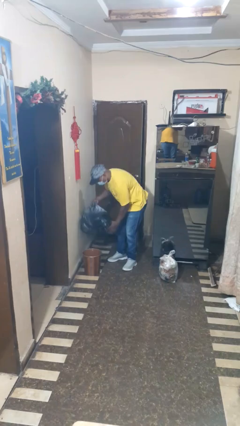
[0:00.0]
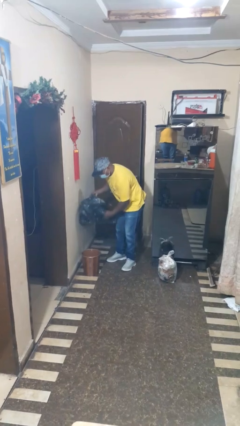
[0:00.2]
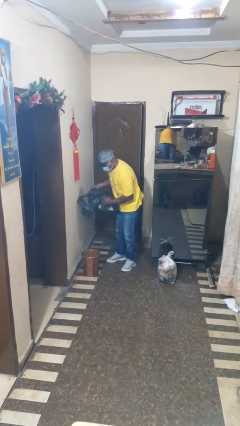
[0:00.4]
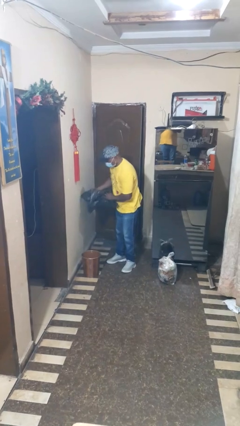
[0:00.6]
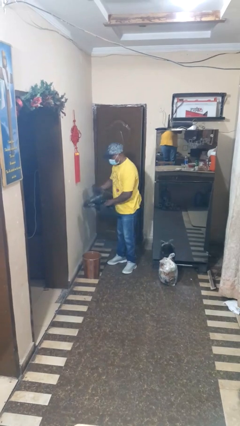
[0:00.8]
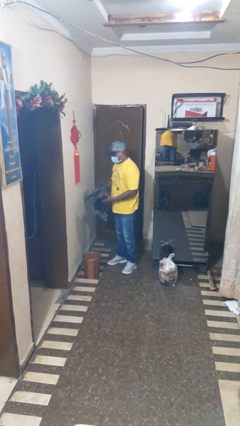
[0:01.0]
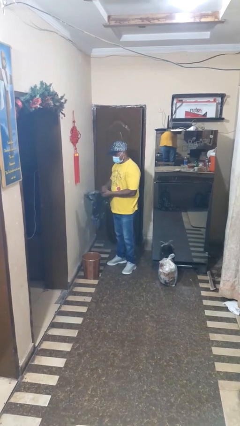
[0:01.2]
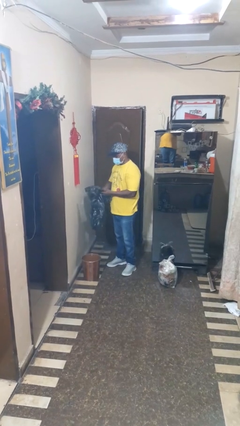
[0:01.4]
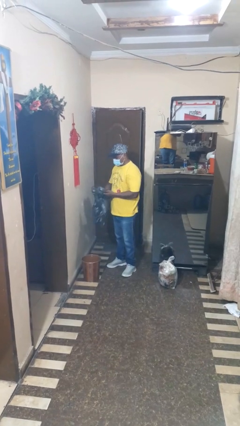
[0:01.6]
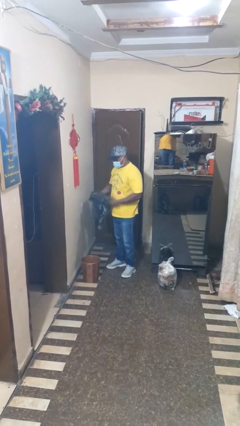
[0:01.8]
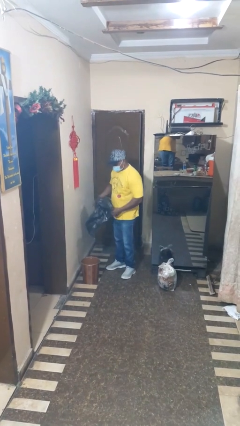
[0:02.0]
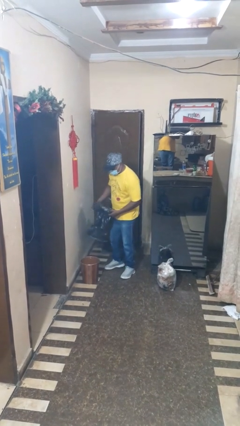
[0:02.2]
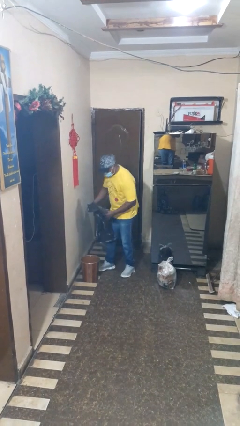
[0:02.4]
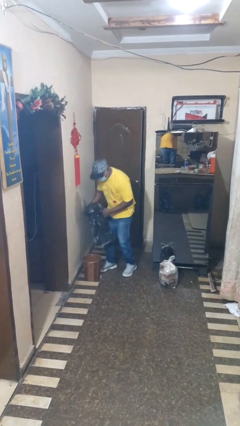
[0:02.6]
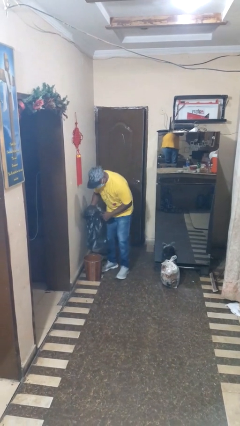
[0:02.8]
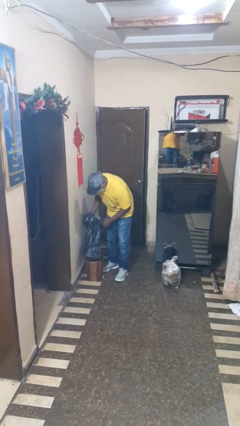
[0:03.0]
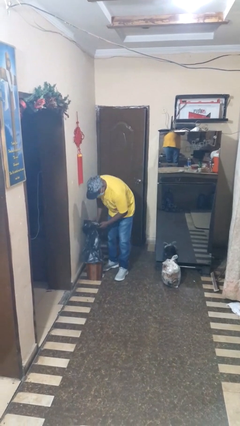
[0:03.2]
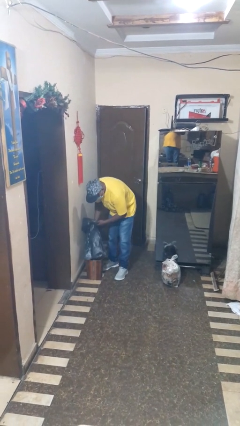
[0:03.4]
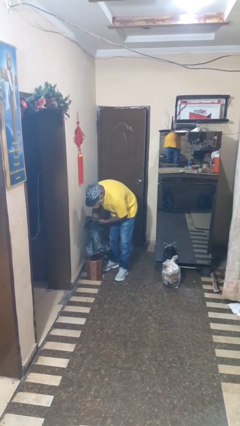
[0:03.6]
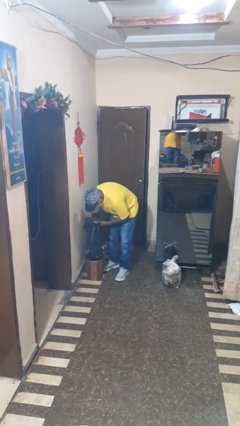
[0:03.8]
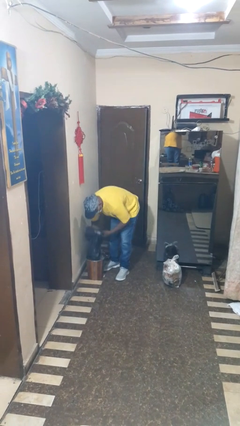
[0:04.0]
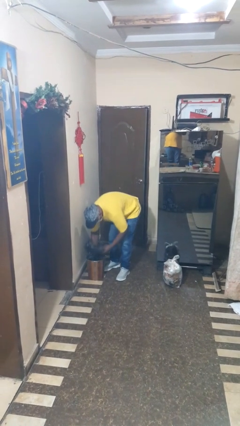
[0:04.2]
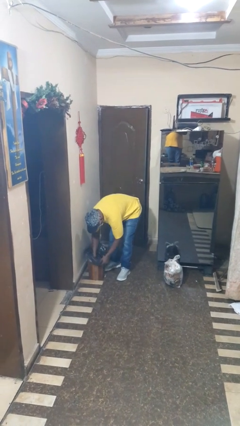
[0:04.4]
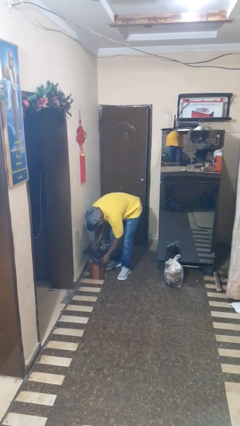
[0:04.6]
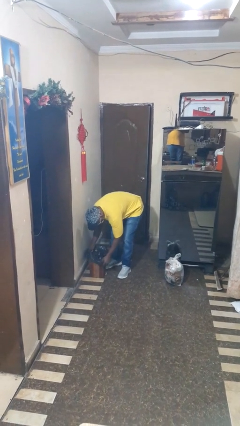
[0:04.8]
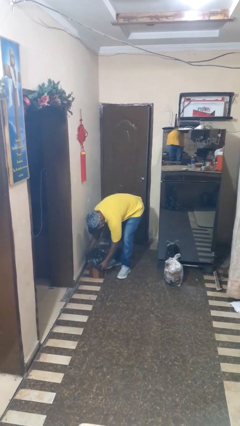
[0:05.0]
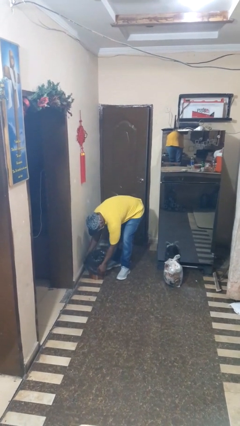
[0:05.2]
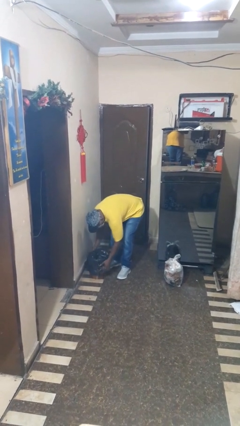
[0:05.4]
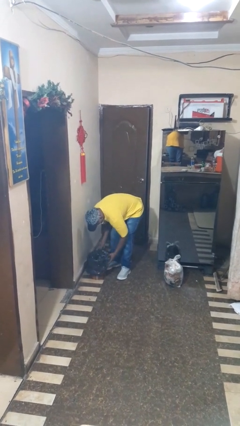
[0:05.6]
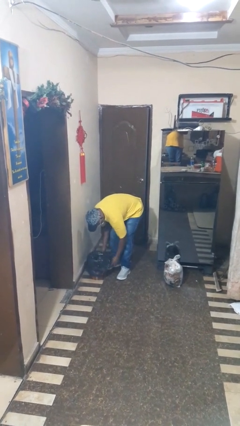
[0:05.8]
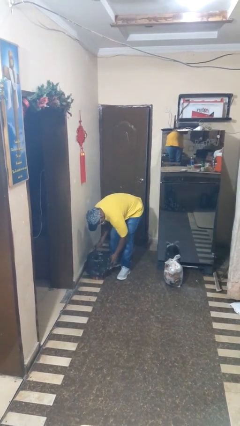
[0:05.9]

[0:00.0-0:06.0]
person inserts trashbag into trashcan

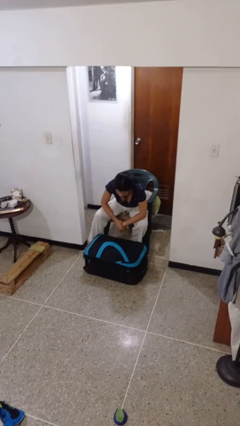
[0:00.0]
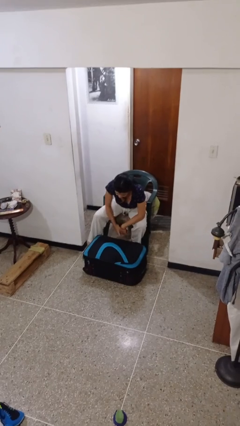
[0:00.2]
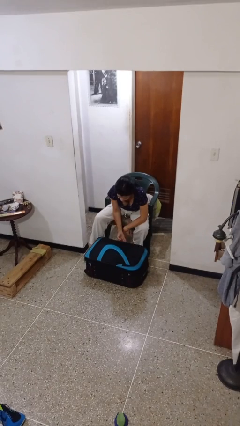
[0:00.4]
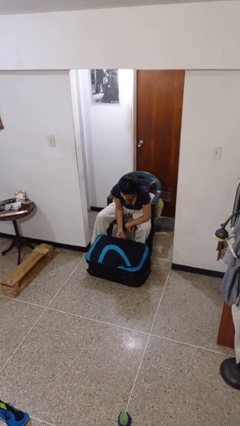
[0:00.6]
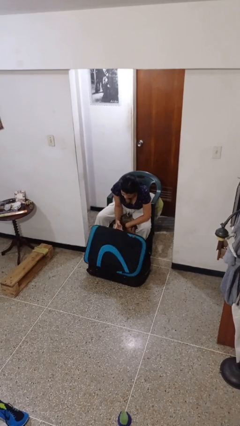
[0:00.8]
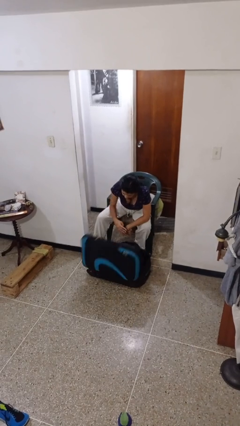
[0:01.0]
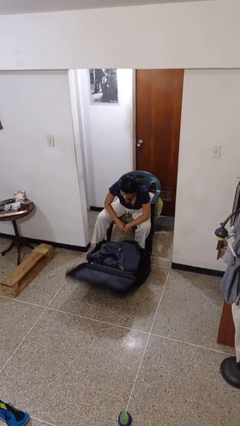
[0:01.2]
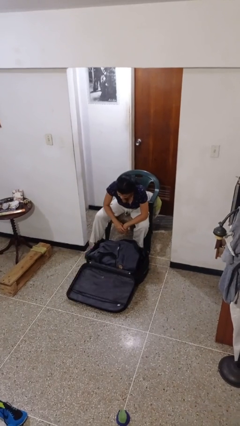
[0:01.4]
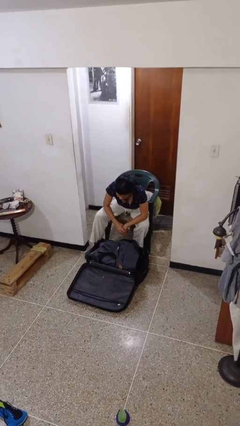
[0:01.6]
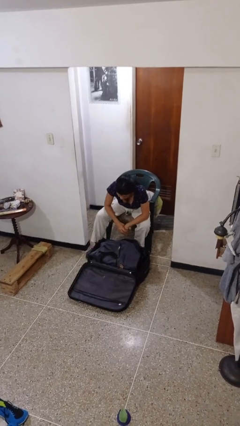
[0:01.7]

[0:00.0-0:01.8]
person opens suitcase

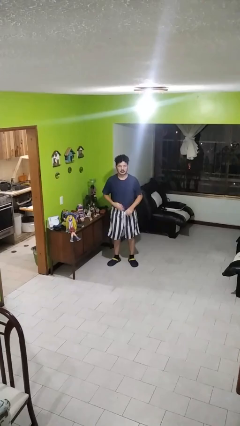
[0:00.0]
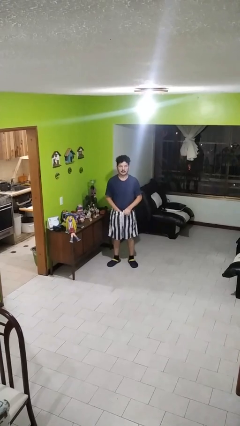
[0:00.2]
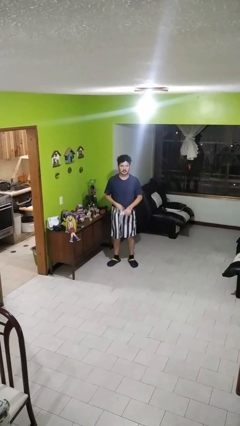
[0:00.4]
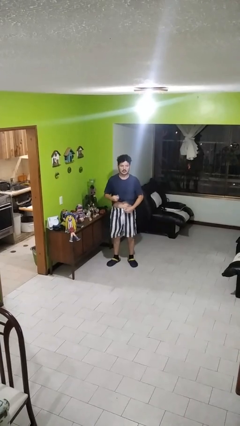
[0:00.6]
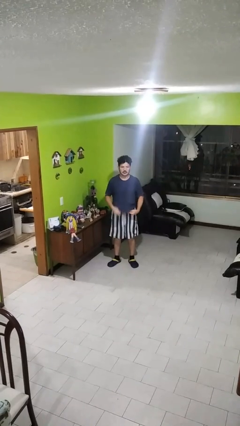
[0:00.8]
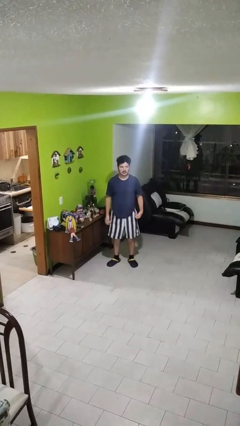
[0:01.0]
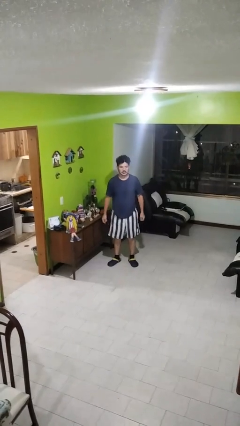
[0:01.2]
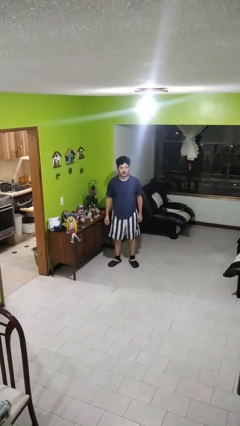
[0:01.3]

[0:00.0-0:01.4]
person untucks shirt

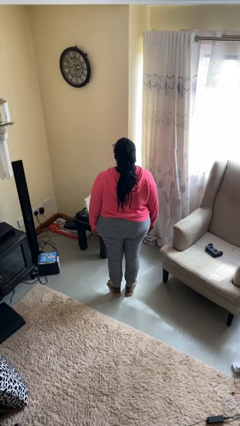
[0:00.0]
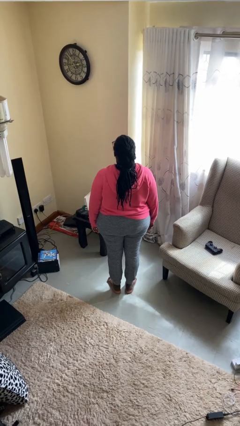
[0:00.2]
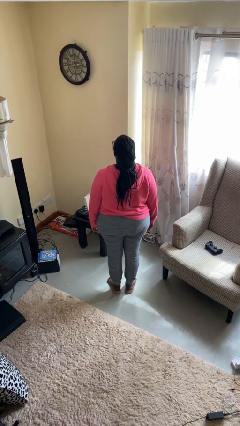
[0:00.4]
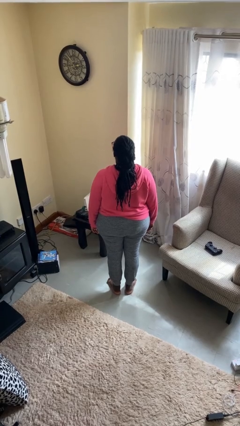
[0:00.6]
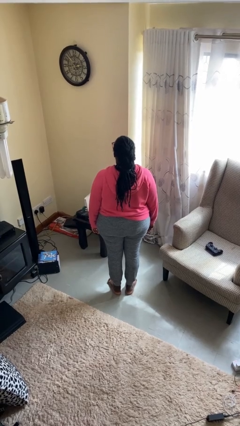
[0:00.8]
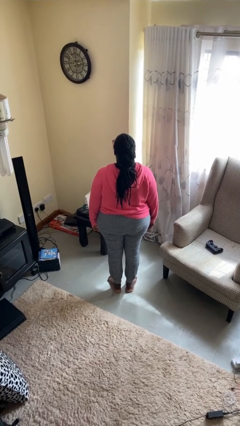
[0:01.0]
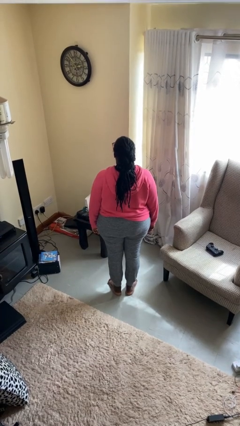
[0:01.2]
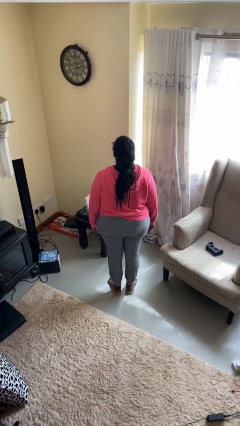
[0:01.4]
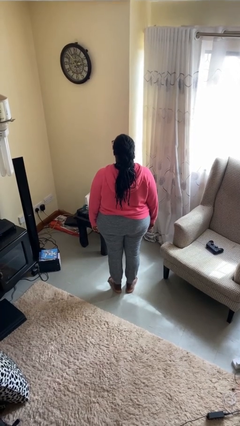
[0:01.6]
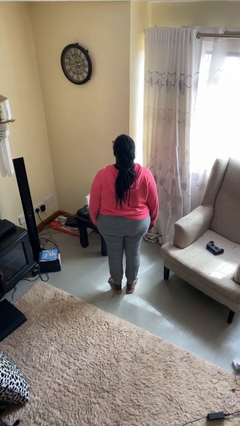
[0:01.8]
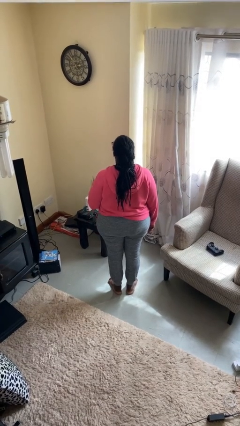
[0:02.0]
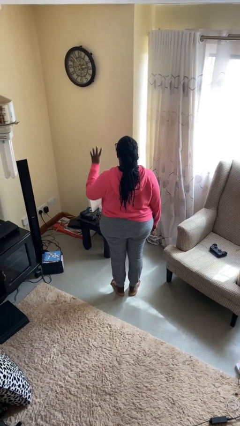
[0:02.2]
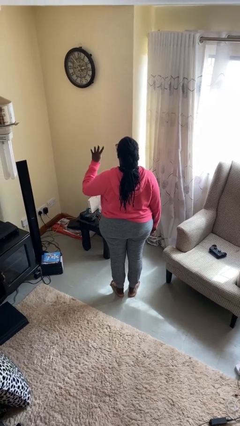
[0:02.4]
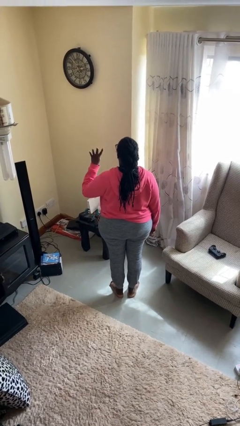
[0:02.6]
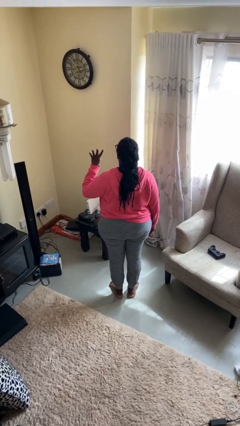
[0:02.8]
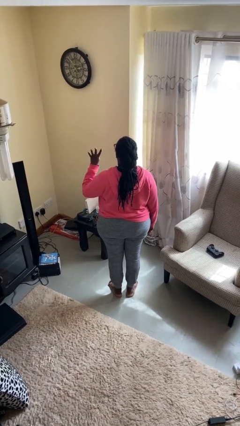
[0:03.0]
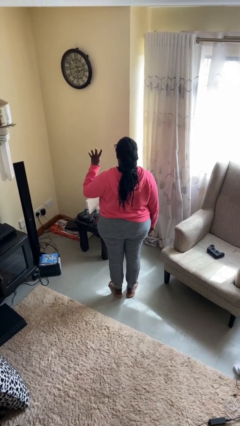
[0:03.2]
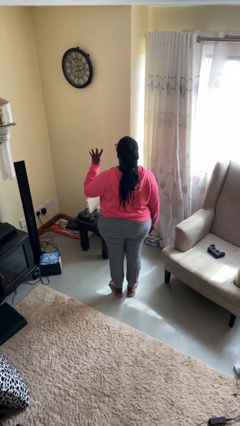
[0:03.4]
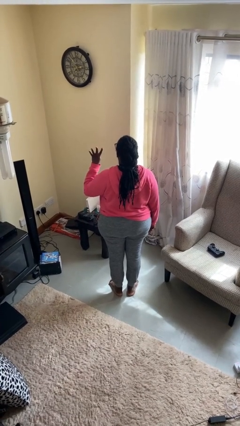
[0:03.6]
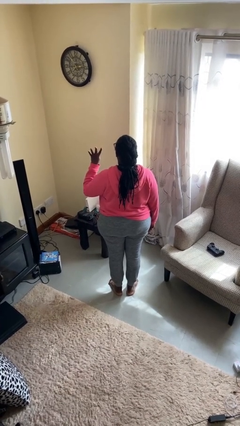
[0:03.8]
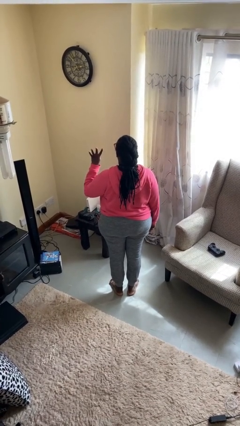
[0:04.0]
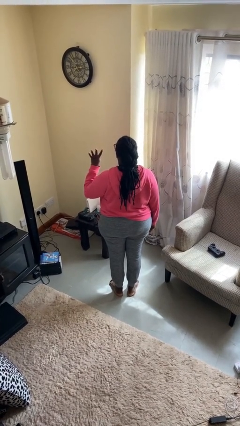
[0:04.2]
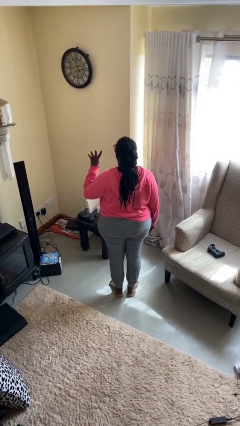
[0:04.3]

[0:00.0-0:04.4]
person gestures number four

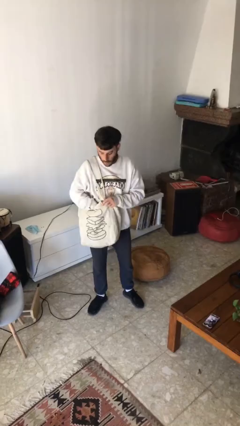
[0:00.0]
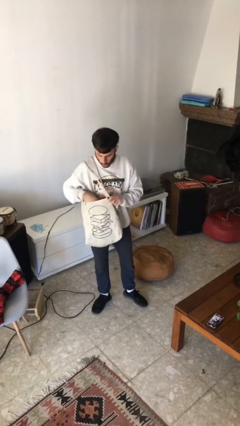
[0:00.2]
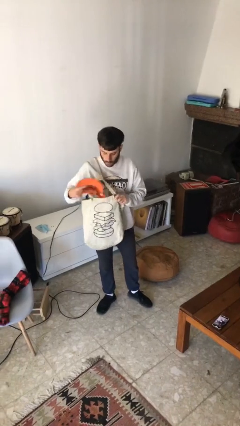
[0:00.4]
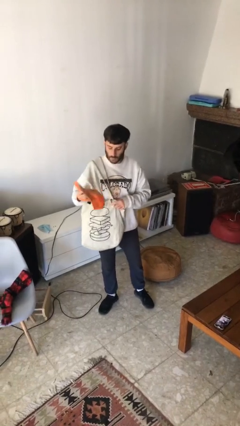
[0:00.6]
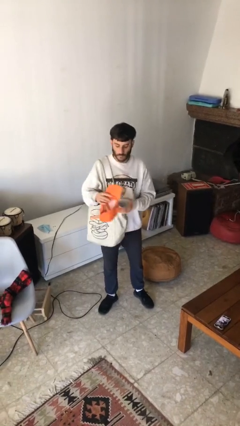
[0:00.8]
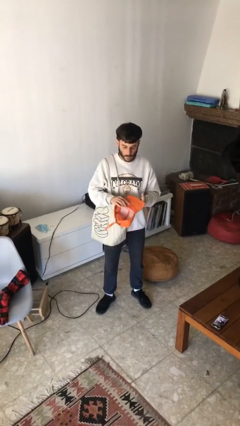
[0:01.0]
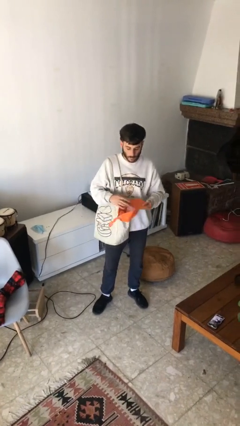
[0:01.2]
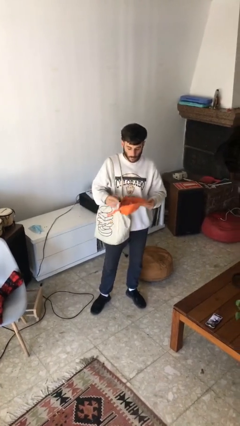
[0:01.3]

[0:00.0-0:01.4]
person takes object from purse

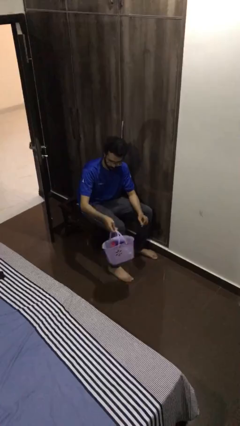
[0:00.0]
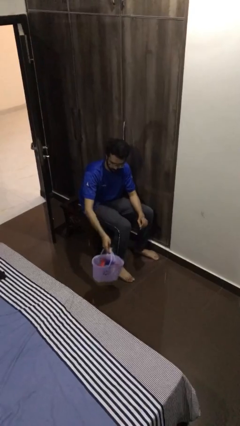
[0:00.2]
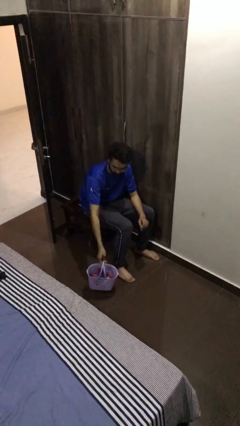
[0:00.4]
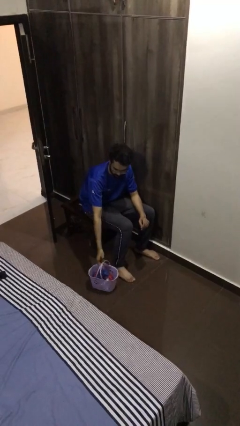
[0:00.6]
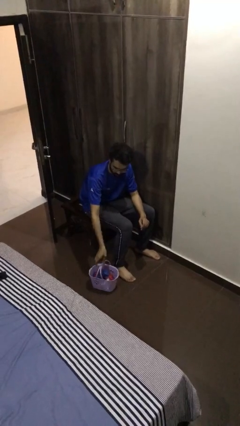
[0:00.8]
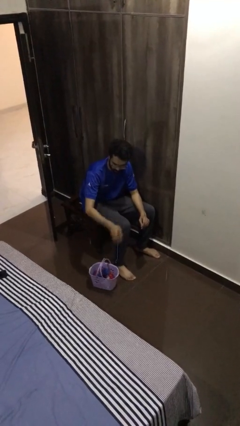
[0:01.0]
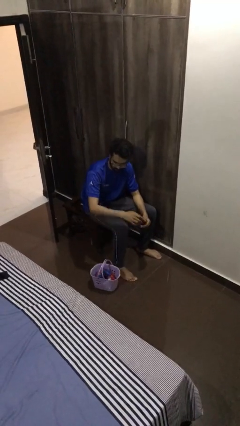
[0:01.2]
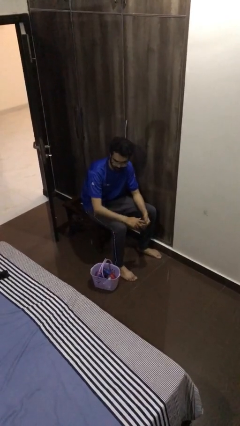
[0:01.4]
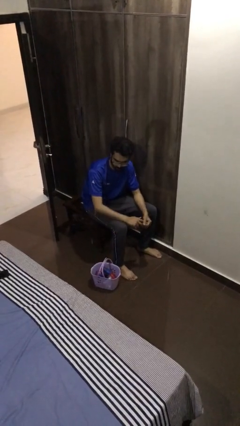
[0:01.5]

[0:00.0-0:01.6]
person puts down object on floor

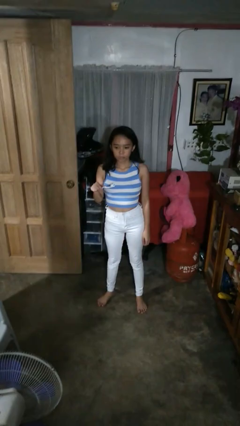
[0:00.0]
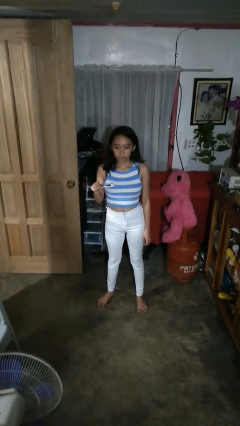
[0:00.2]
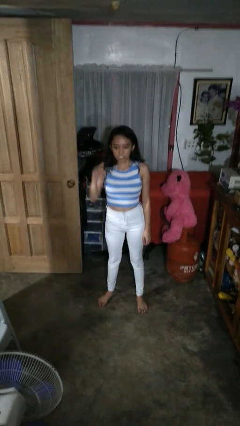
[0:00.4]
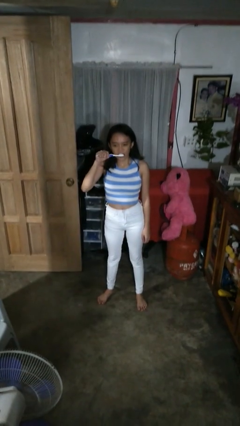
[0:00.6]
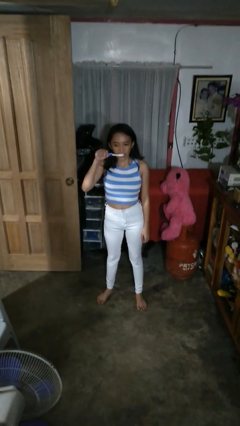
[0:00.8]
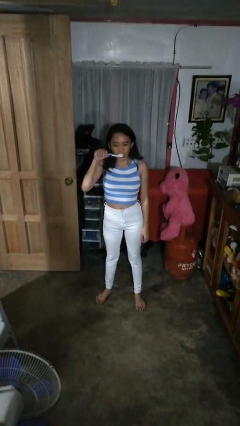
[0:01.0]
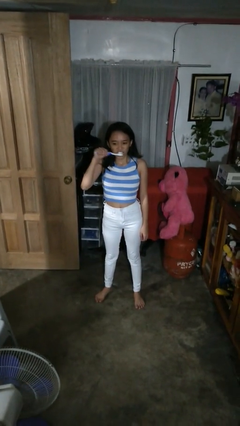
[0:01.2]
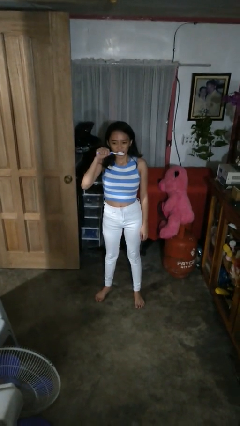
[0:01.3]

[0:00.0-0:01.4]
person brushes teeth
